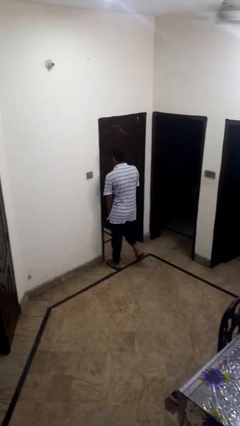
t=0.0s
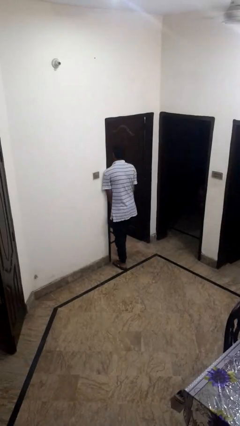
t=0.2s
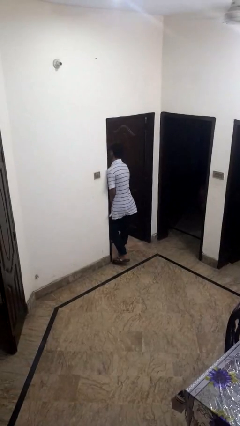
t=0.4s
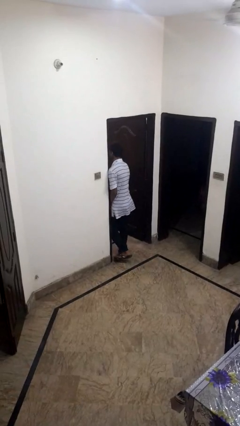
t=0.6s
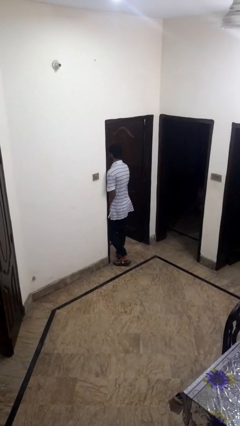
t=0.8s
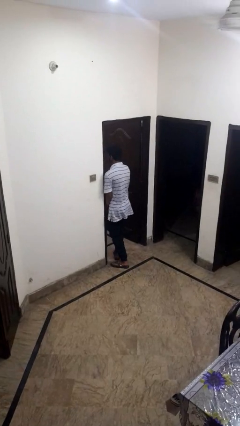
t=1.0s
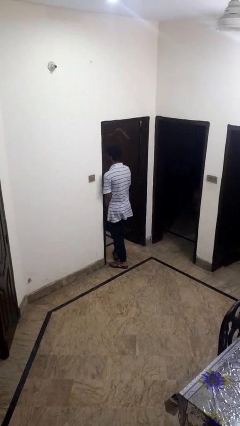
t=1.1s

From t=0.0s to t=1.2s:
person bumps into wall

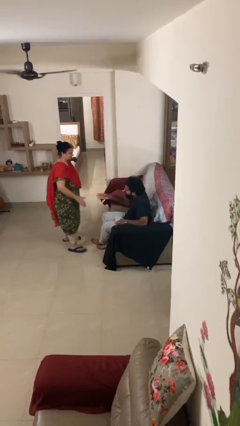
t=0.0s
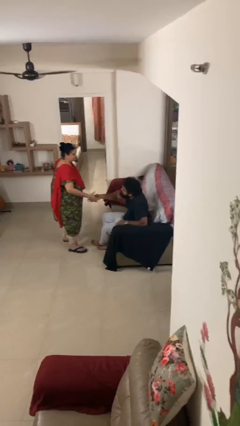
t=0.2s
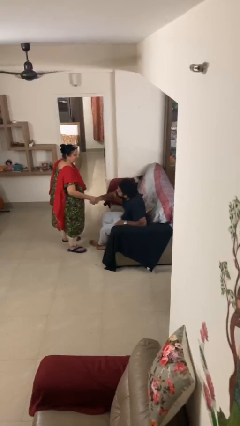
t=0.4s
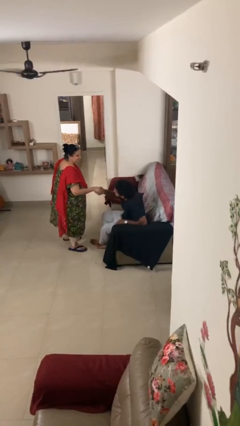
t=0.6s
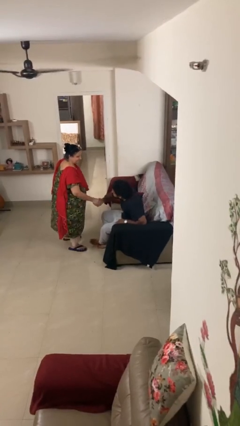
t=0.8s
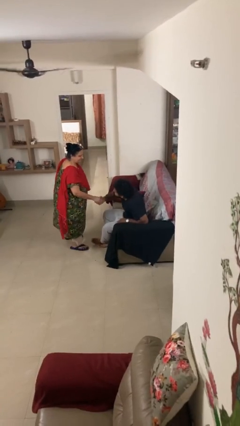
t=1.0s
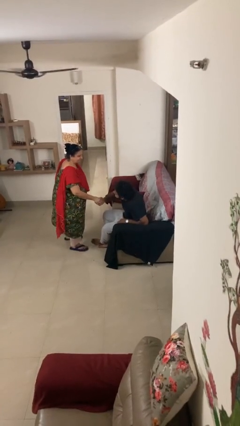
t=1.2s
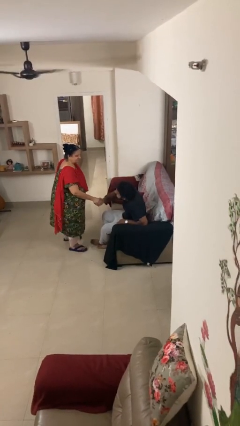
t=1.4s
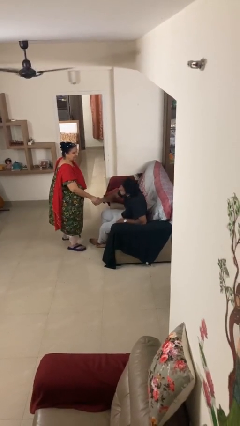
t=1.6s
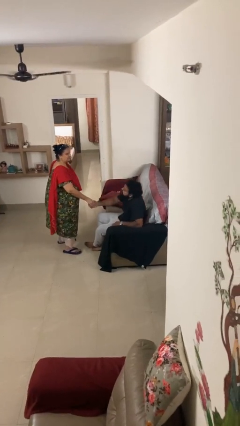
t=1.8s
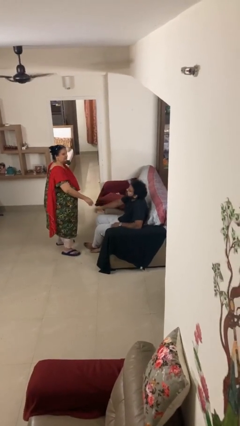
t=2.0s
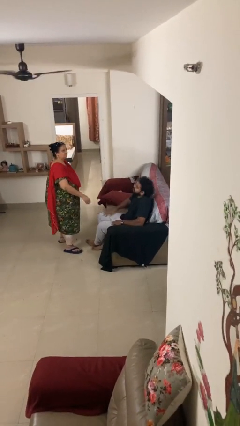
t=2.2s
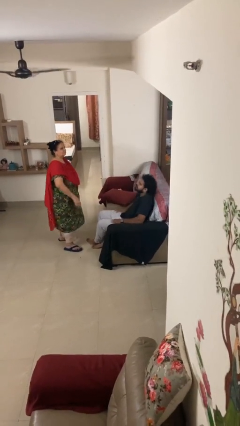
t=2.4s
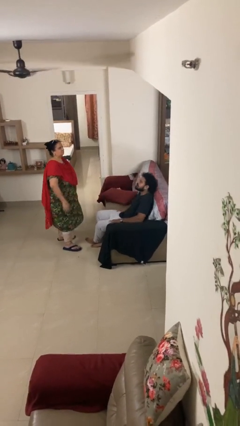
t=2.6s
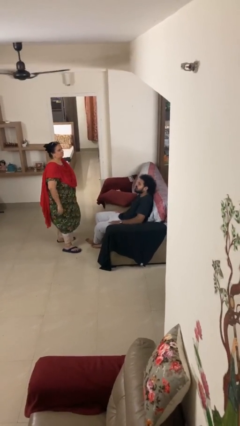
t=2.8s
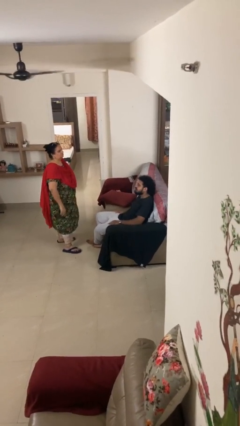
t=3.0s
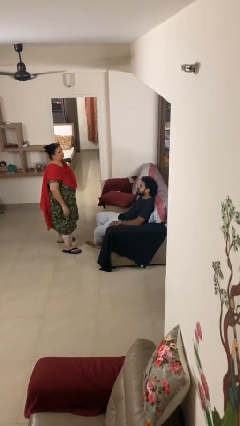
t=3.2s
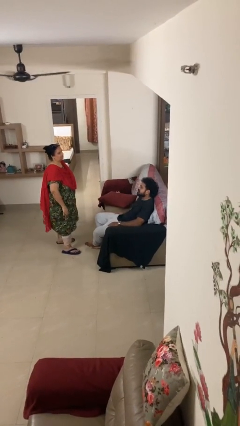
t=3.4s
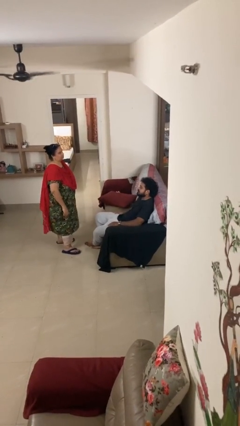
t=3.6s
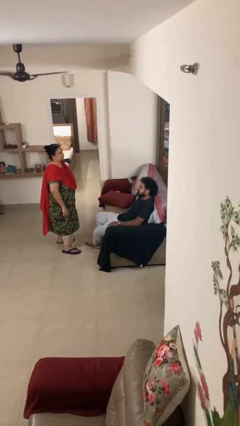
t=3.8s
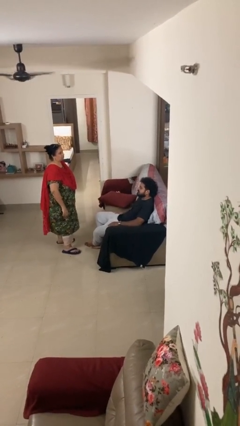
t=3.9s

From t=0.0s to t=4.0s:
person shakes hand

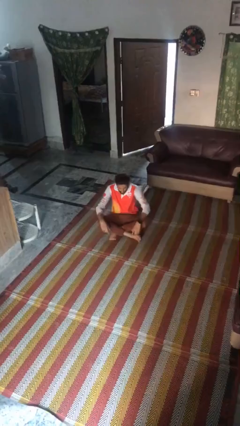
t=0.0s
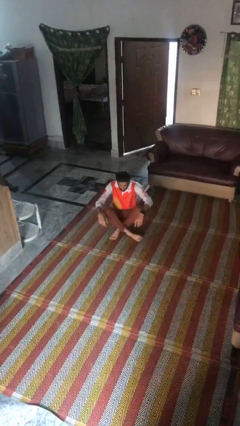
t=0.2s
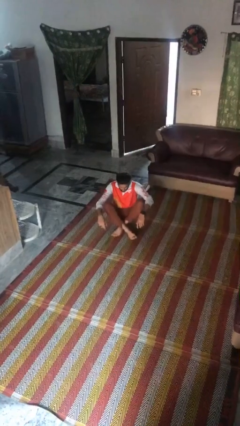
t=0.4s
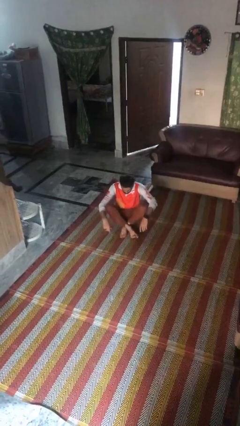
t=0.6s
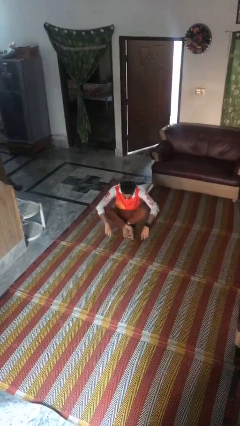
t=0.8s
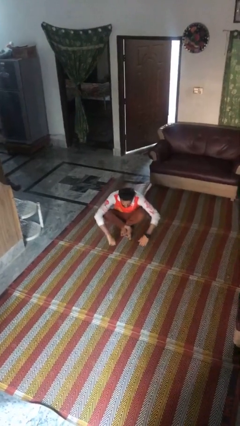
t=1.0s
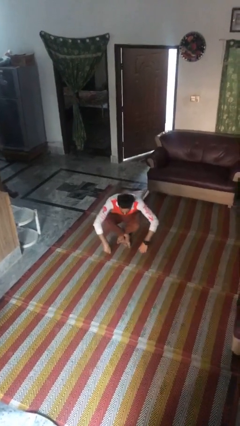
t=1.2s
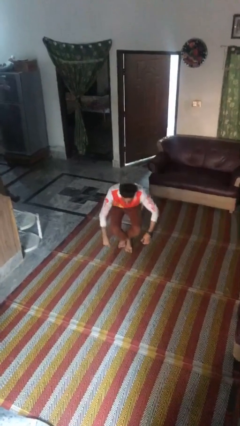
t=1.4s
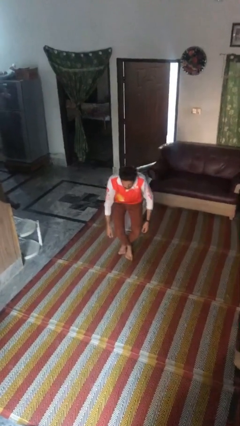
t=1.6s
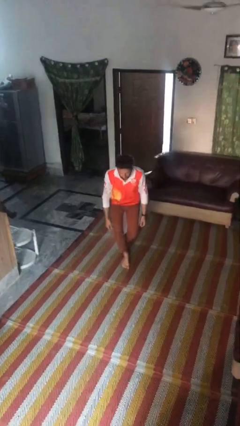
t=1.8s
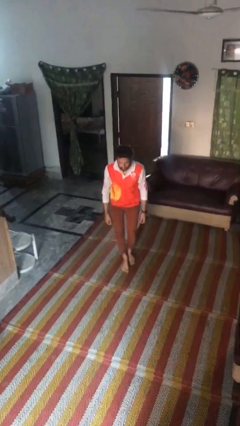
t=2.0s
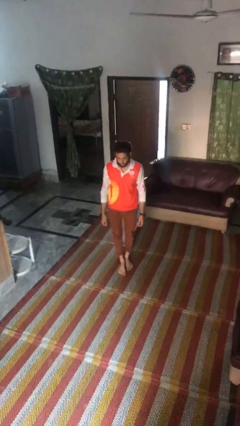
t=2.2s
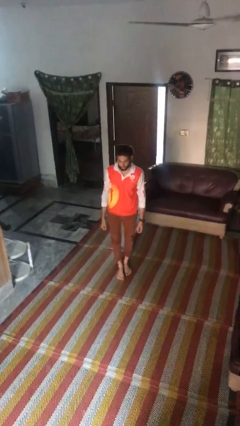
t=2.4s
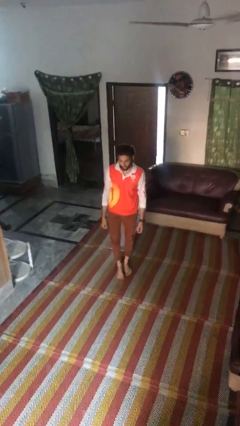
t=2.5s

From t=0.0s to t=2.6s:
person stands up from floor

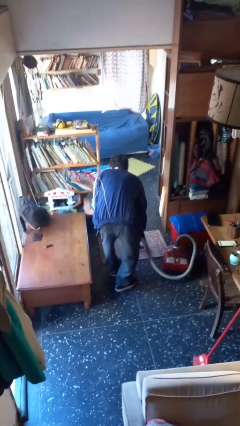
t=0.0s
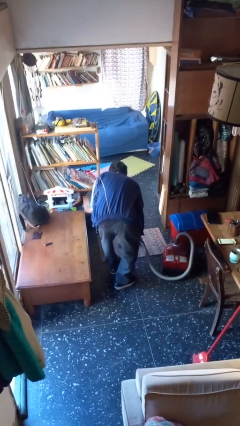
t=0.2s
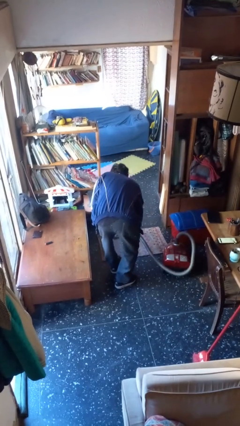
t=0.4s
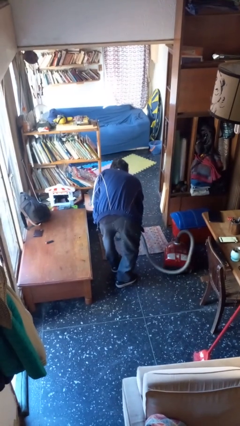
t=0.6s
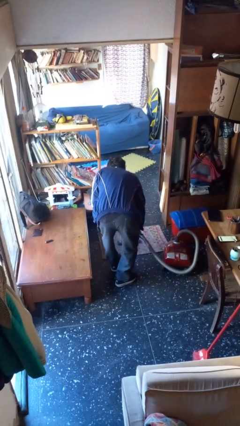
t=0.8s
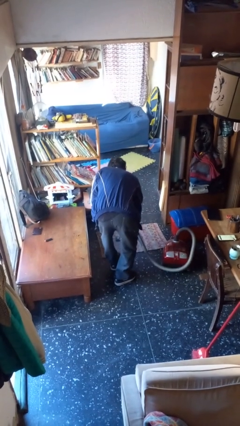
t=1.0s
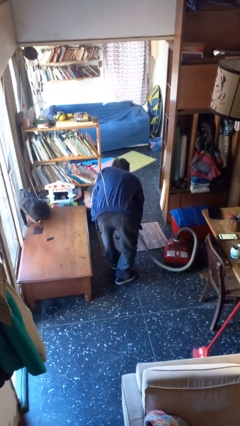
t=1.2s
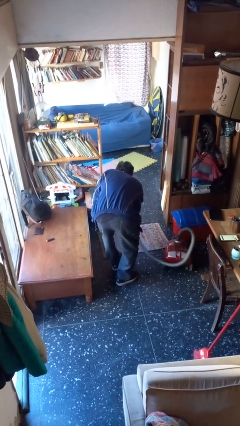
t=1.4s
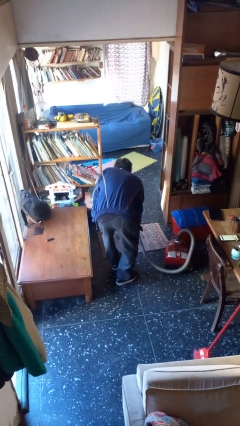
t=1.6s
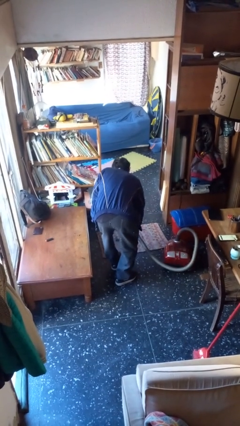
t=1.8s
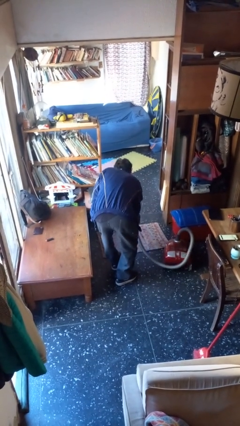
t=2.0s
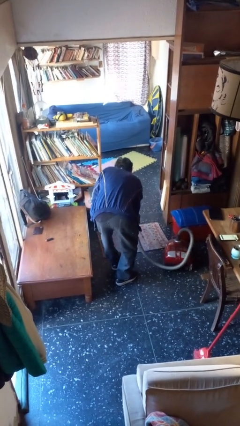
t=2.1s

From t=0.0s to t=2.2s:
person vacuums carpet

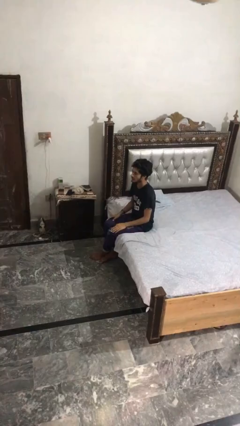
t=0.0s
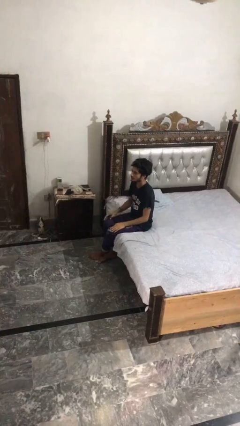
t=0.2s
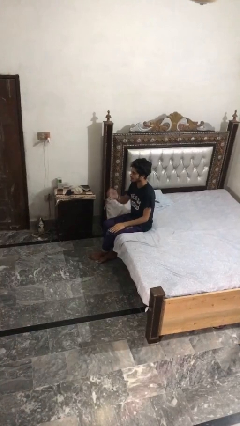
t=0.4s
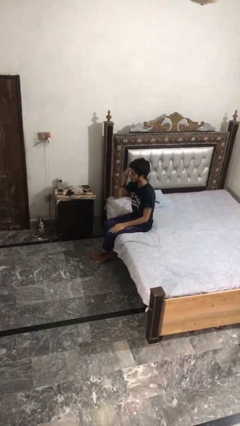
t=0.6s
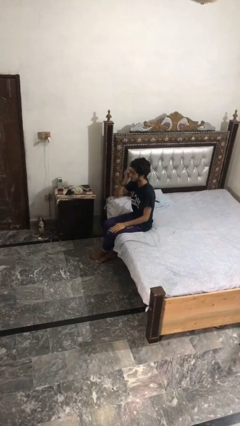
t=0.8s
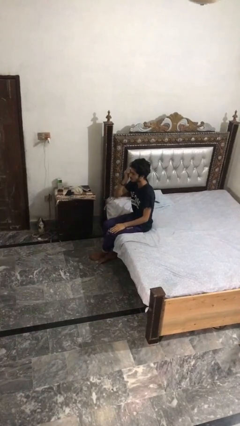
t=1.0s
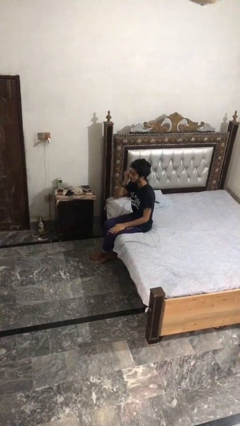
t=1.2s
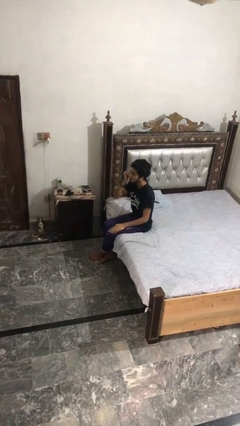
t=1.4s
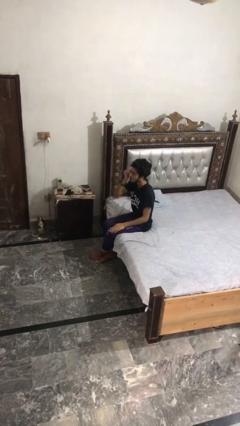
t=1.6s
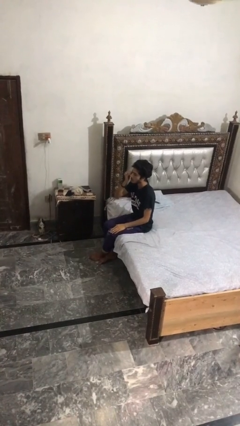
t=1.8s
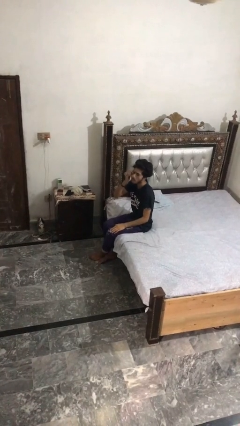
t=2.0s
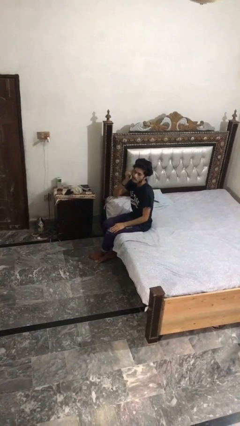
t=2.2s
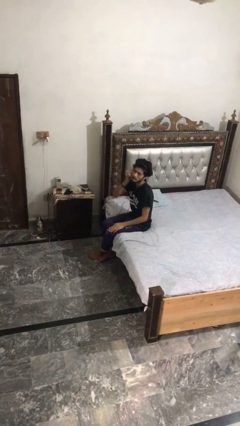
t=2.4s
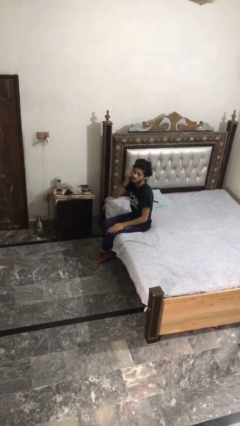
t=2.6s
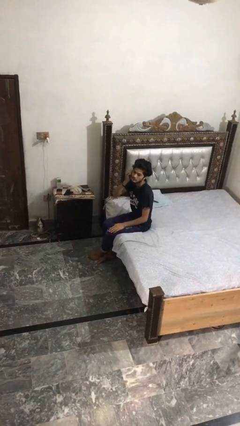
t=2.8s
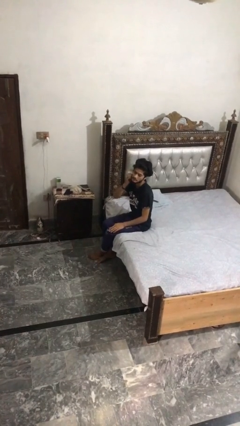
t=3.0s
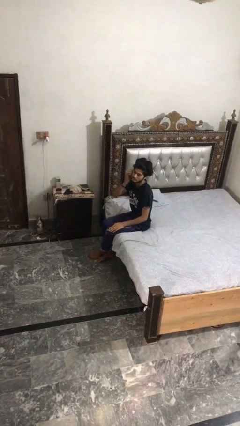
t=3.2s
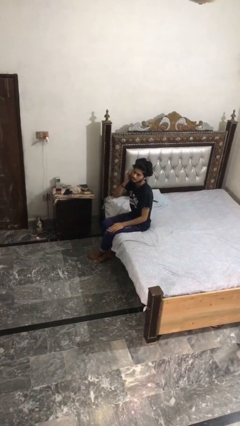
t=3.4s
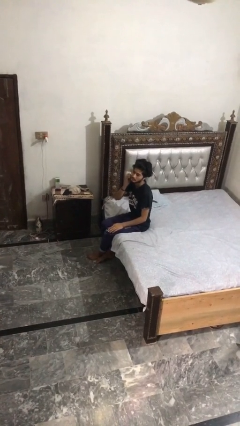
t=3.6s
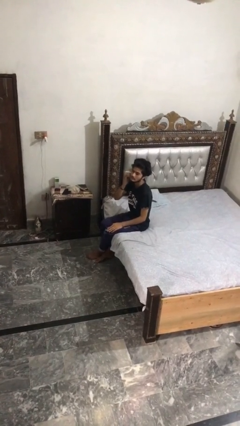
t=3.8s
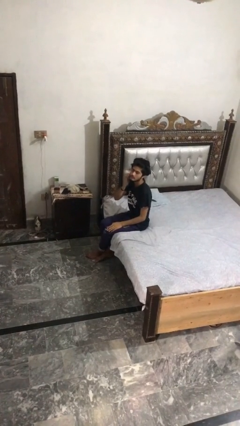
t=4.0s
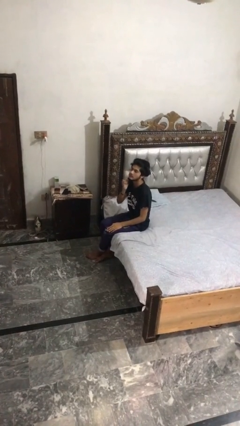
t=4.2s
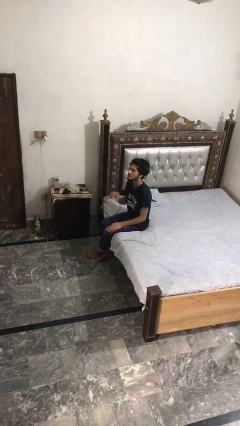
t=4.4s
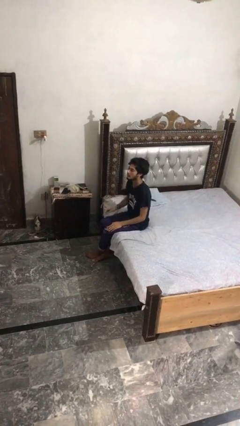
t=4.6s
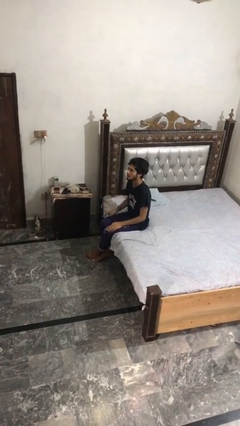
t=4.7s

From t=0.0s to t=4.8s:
person scratches face

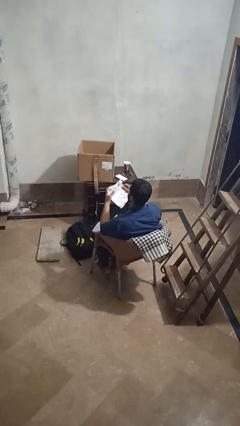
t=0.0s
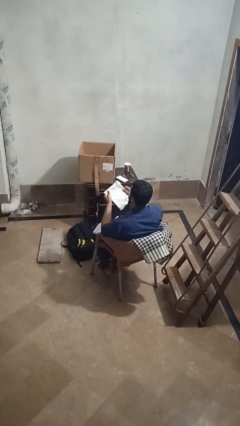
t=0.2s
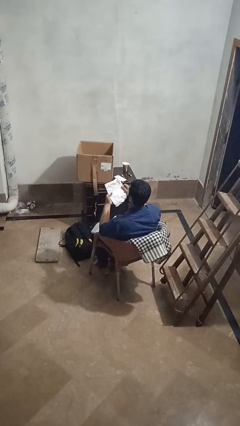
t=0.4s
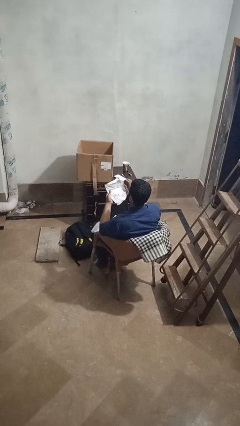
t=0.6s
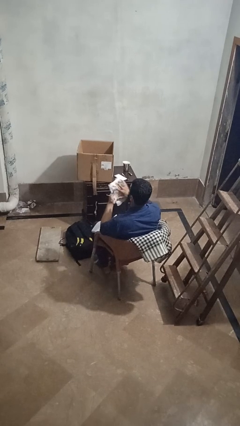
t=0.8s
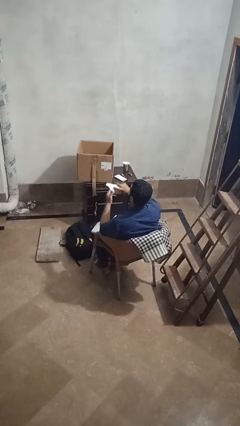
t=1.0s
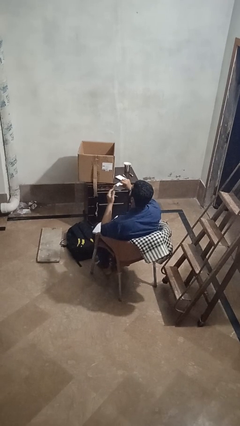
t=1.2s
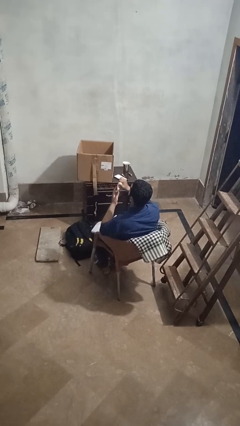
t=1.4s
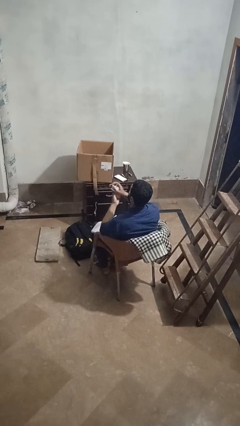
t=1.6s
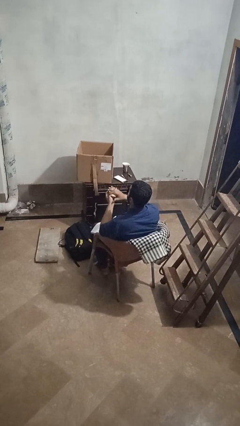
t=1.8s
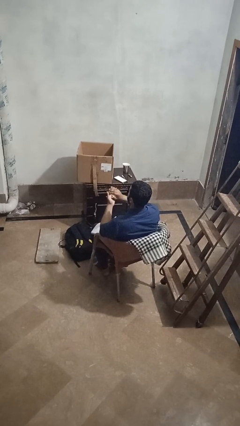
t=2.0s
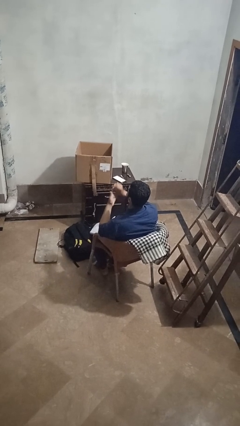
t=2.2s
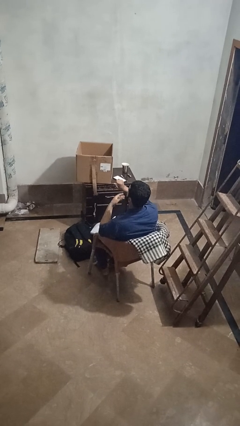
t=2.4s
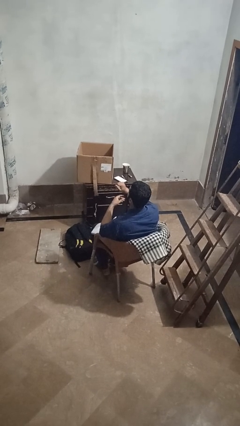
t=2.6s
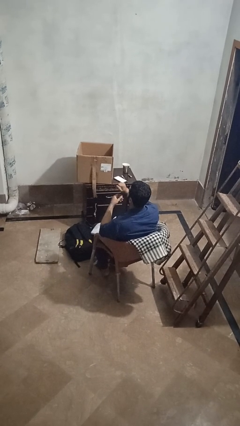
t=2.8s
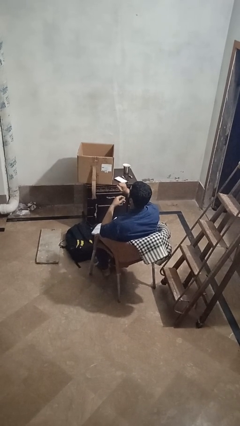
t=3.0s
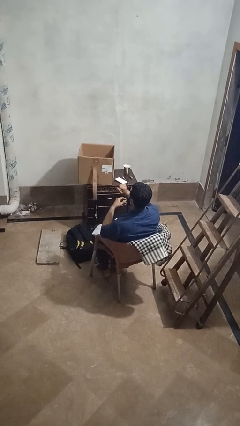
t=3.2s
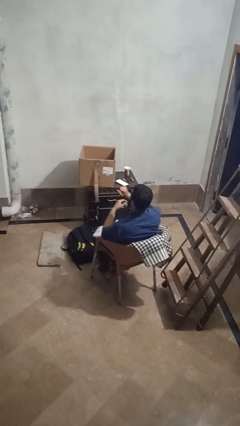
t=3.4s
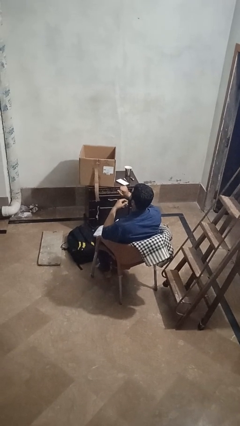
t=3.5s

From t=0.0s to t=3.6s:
person crumples paper
